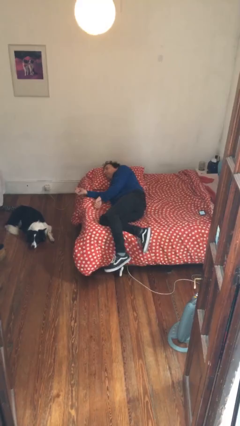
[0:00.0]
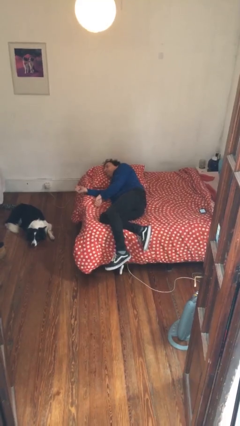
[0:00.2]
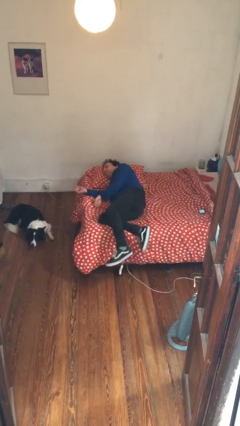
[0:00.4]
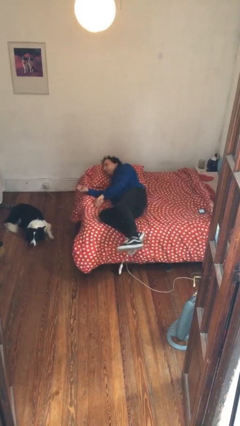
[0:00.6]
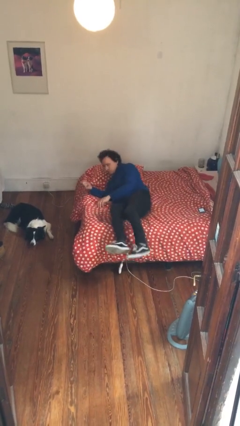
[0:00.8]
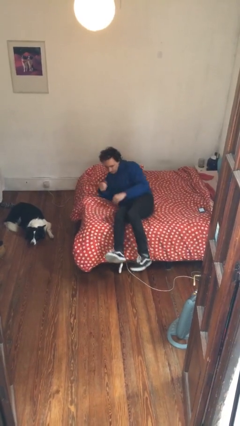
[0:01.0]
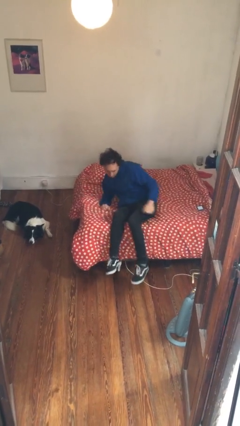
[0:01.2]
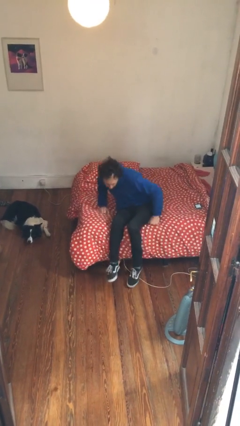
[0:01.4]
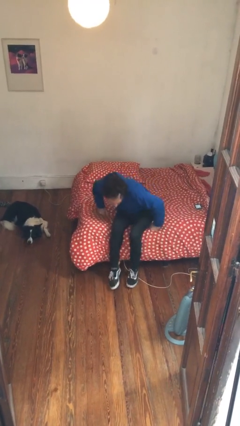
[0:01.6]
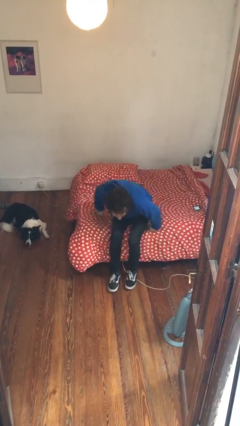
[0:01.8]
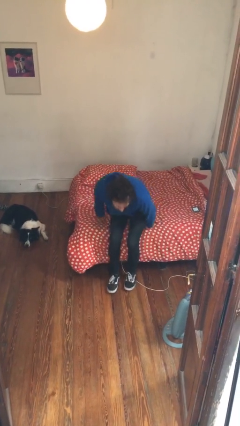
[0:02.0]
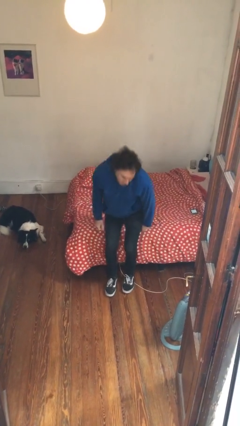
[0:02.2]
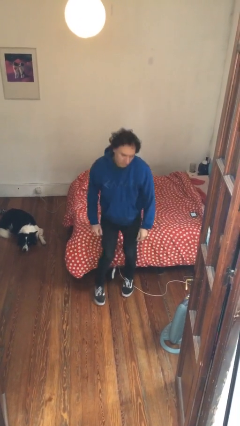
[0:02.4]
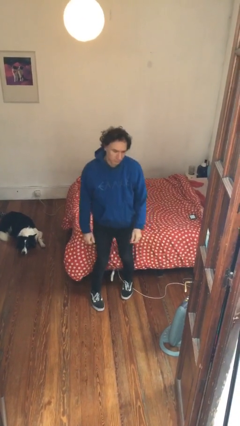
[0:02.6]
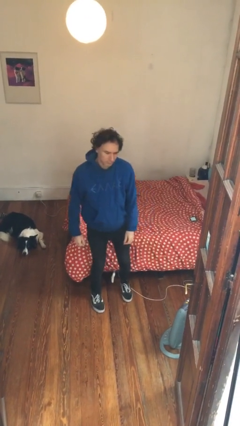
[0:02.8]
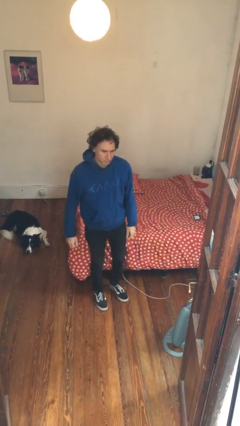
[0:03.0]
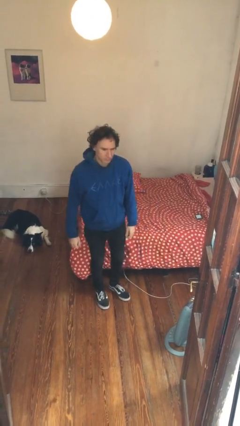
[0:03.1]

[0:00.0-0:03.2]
person stands up

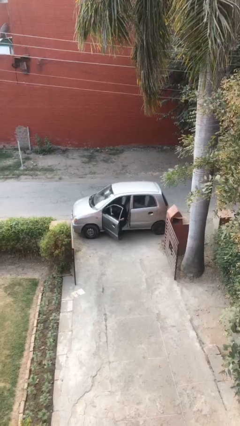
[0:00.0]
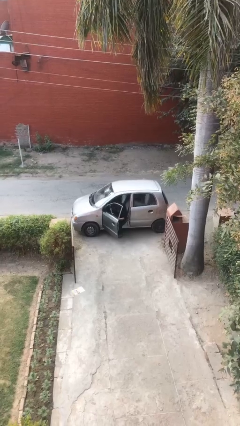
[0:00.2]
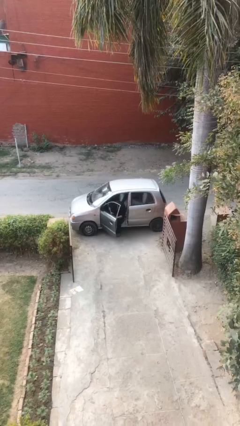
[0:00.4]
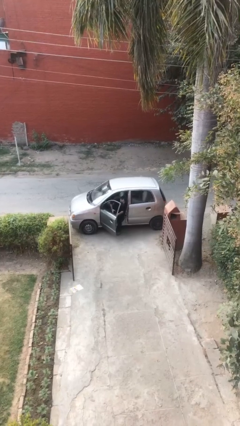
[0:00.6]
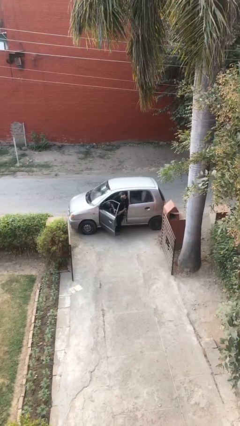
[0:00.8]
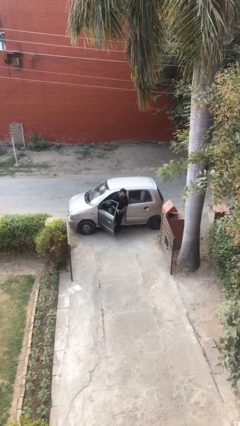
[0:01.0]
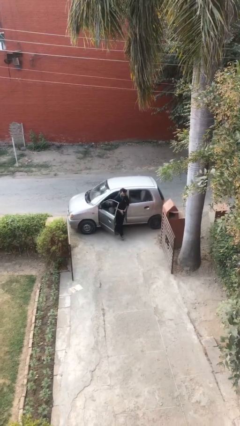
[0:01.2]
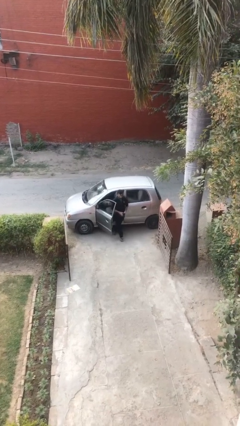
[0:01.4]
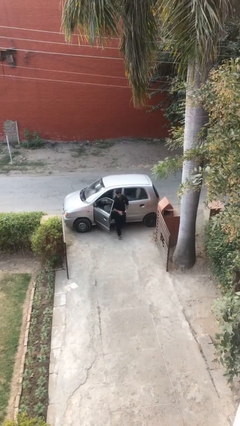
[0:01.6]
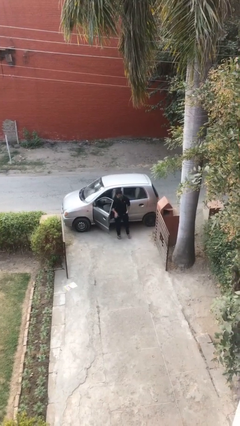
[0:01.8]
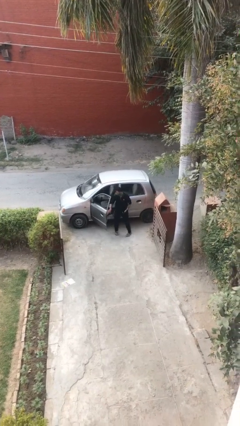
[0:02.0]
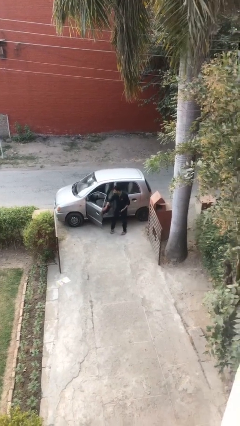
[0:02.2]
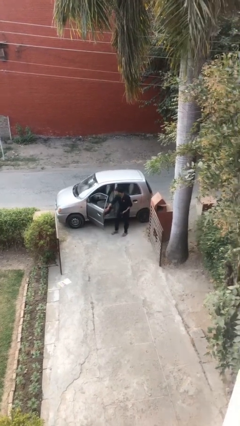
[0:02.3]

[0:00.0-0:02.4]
person exits car

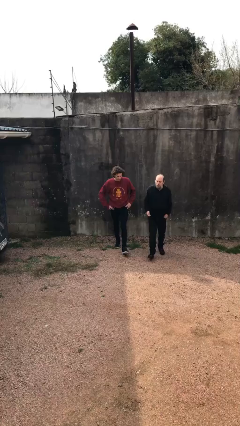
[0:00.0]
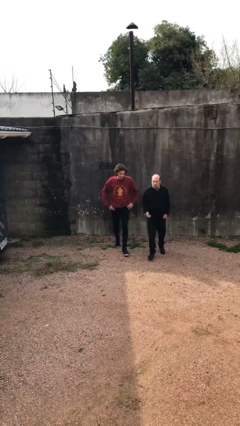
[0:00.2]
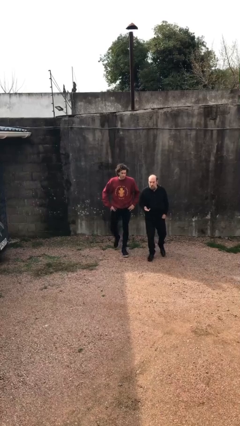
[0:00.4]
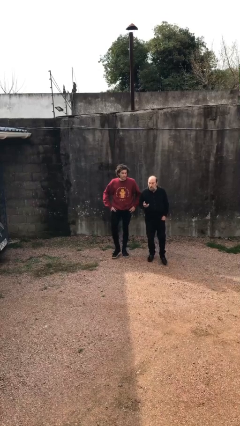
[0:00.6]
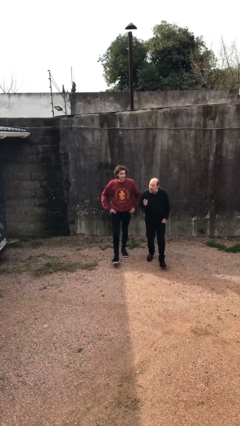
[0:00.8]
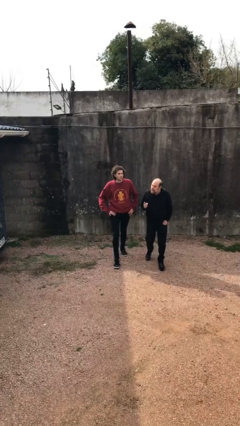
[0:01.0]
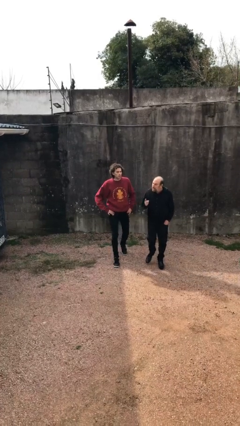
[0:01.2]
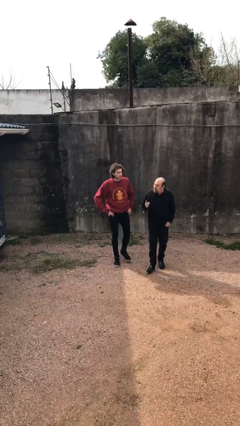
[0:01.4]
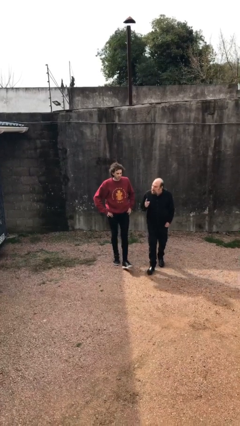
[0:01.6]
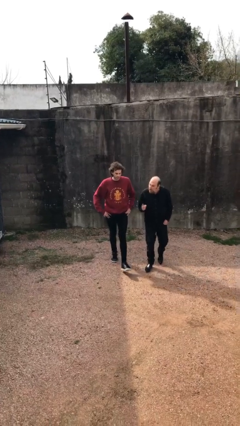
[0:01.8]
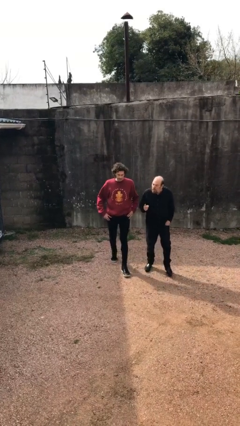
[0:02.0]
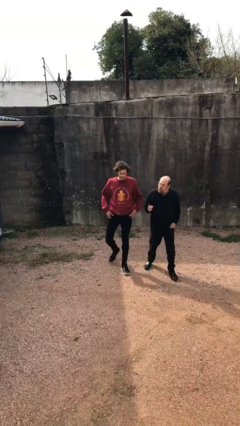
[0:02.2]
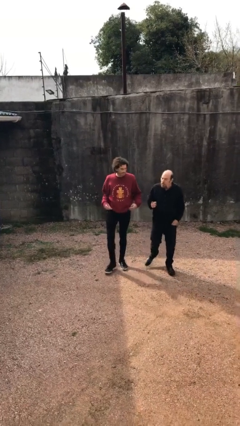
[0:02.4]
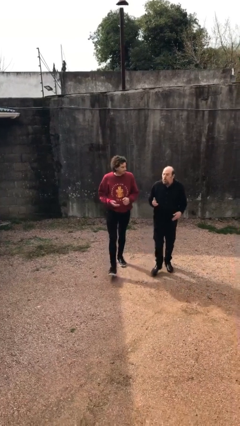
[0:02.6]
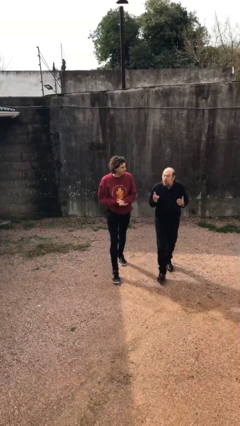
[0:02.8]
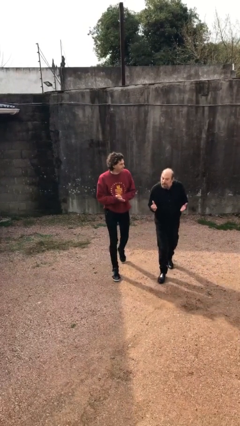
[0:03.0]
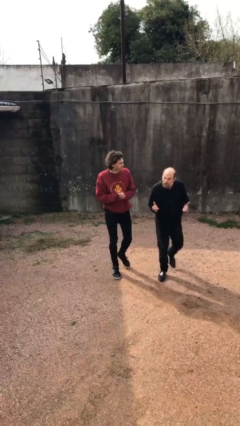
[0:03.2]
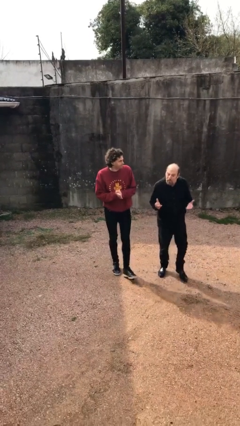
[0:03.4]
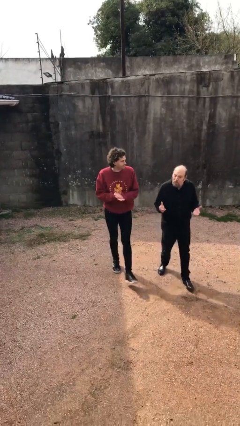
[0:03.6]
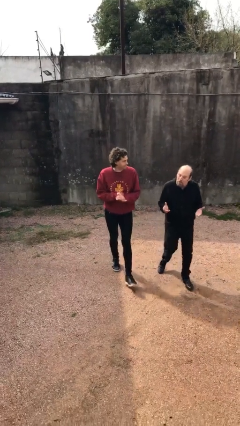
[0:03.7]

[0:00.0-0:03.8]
person talks to person

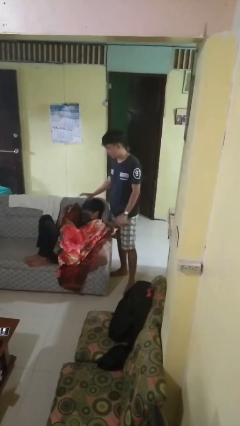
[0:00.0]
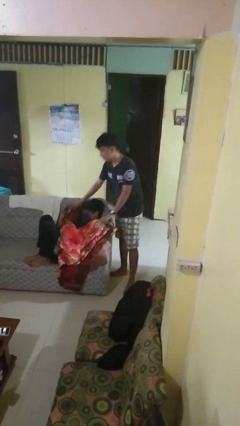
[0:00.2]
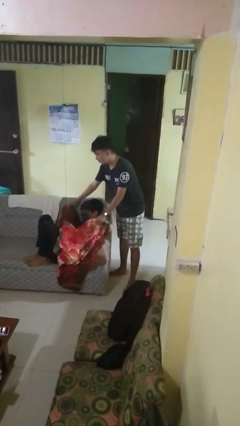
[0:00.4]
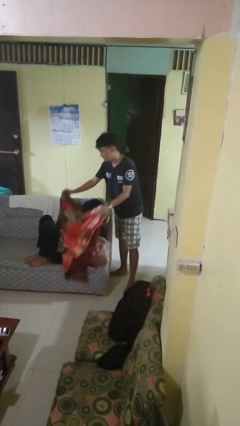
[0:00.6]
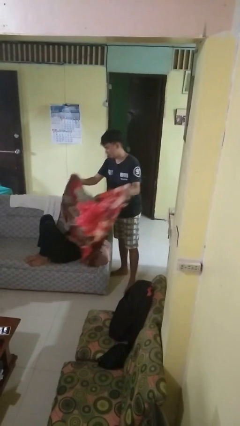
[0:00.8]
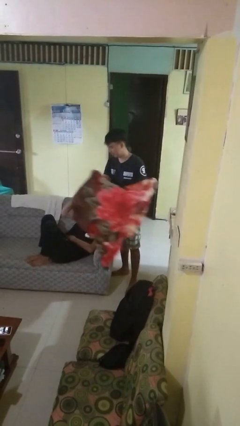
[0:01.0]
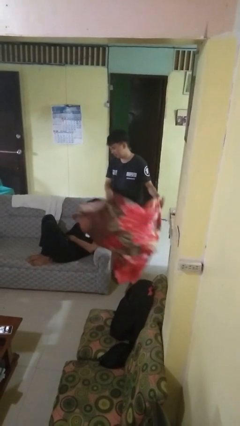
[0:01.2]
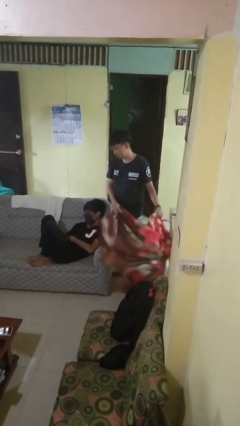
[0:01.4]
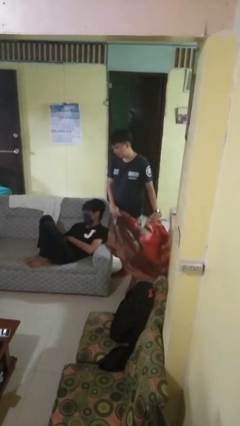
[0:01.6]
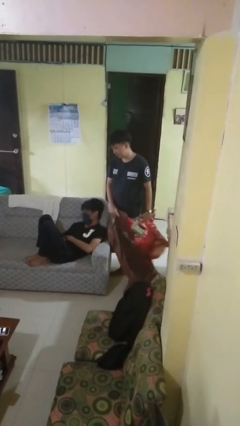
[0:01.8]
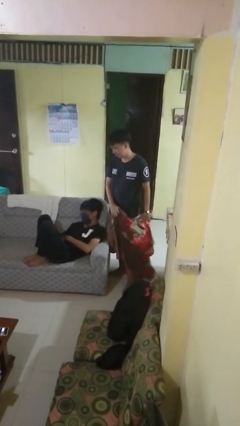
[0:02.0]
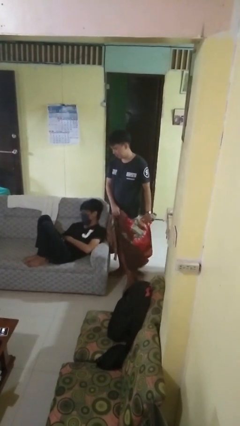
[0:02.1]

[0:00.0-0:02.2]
person uncovers friend with blanket

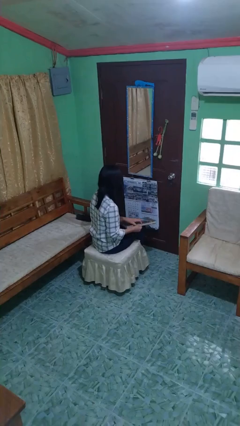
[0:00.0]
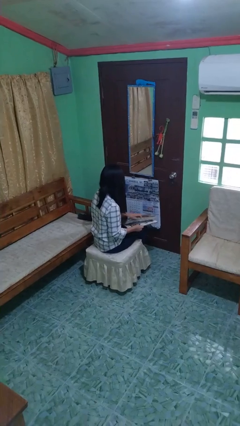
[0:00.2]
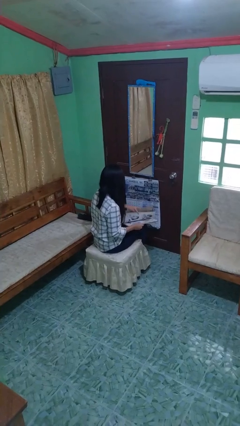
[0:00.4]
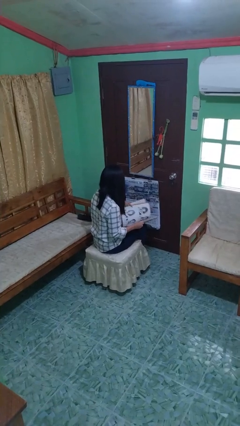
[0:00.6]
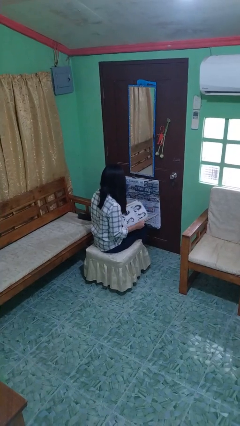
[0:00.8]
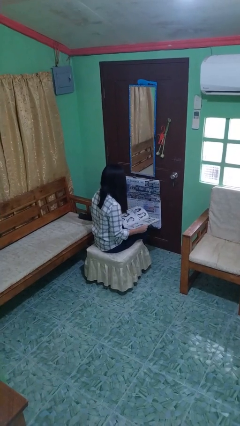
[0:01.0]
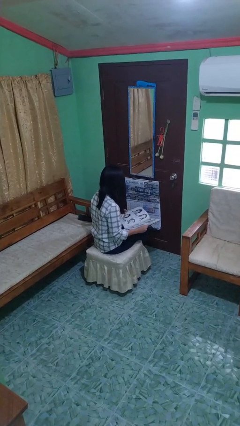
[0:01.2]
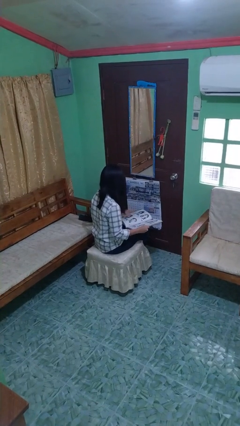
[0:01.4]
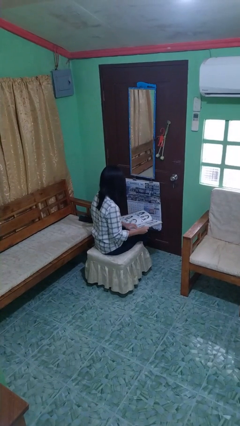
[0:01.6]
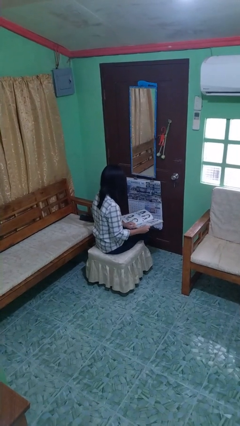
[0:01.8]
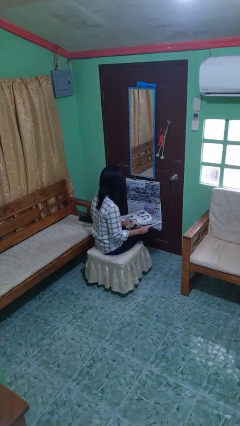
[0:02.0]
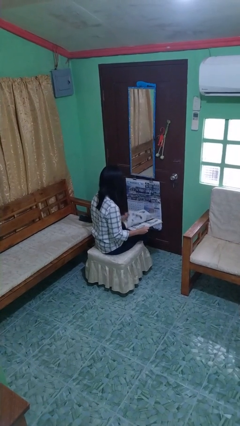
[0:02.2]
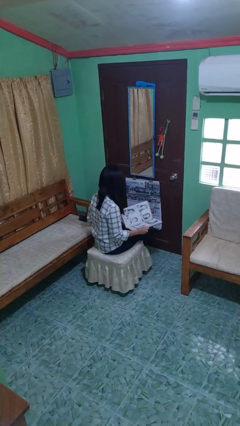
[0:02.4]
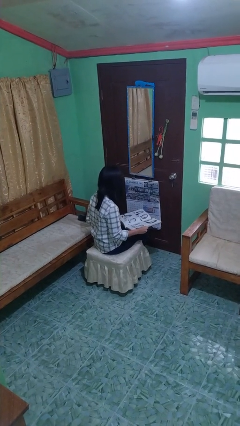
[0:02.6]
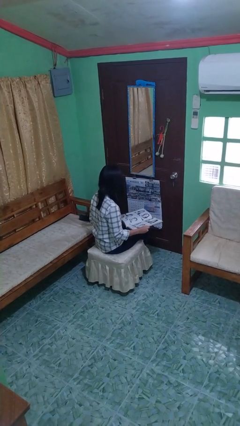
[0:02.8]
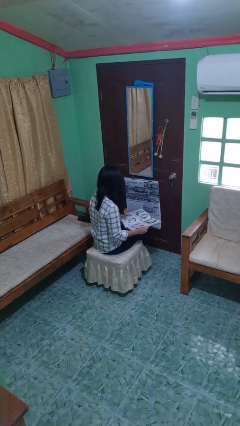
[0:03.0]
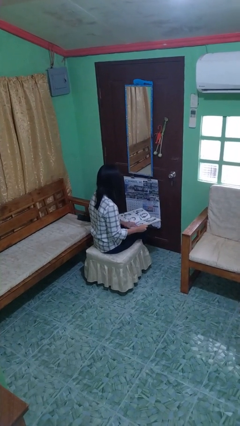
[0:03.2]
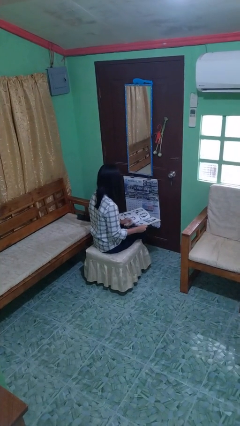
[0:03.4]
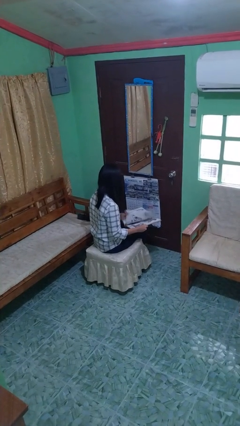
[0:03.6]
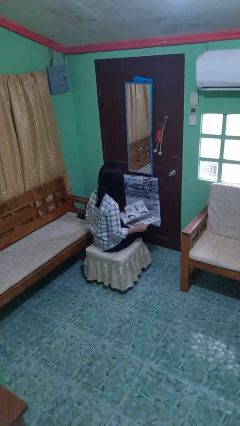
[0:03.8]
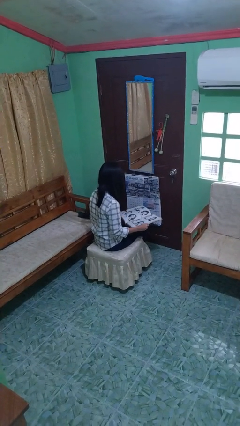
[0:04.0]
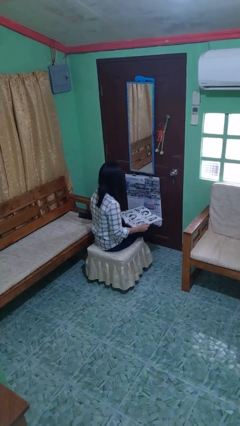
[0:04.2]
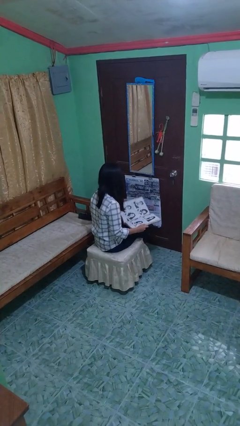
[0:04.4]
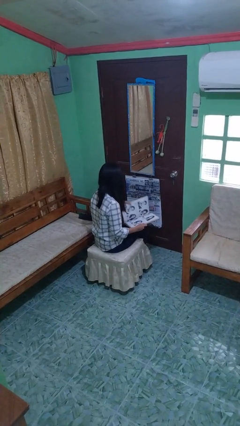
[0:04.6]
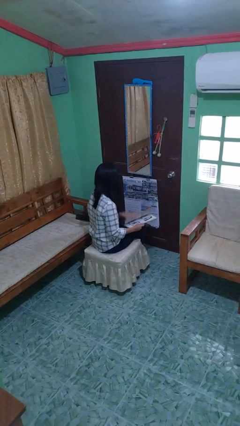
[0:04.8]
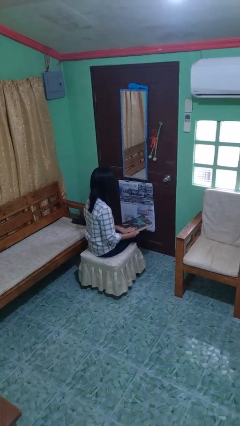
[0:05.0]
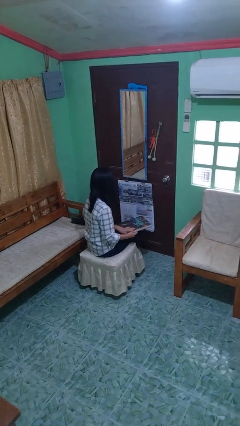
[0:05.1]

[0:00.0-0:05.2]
person reads book

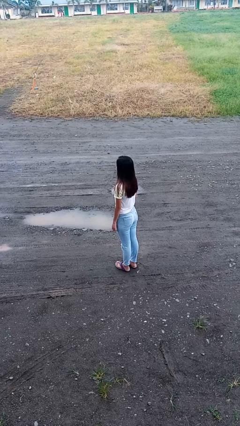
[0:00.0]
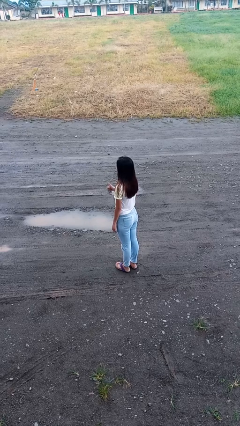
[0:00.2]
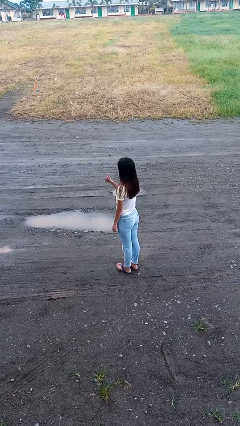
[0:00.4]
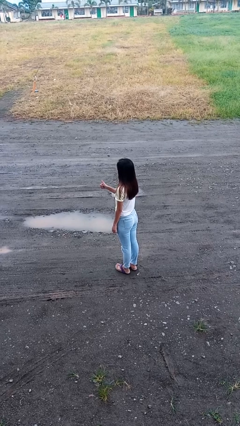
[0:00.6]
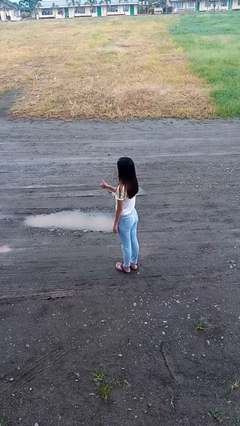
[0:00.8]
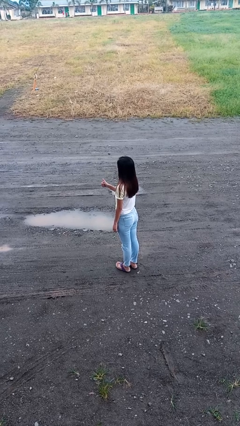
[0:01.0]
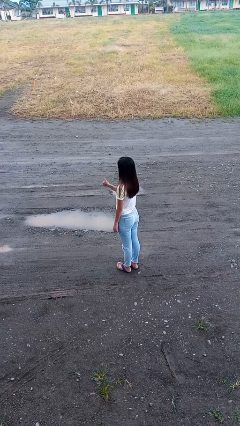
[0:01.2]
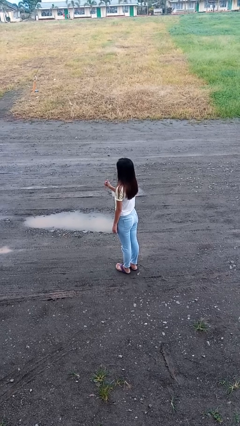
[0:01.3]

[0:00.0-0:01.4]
person gestures thumbs up
